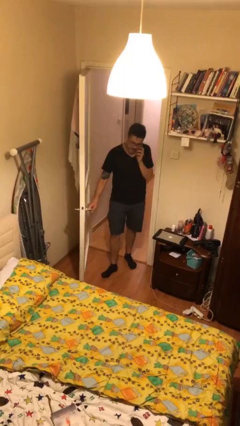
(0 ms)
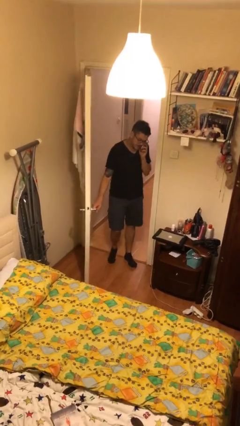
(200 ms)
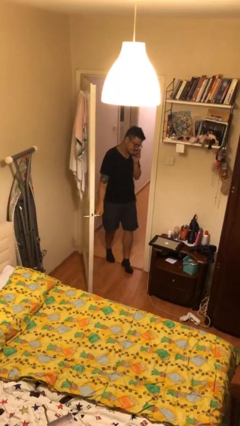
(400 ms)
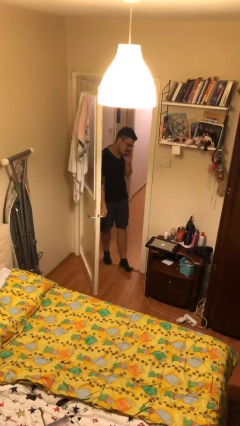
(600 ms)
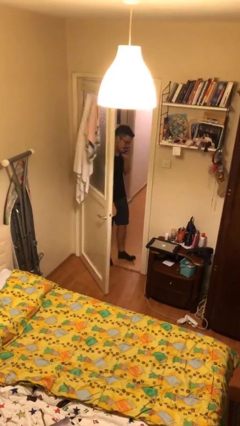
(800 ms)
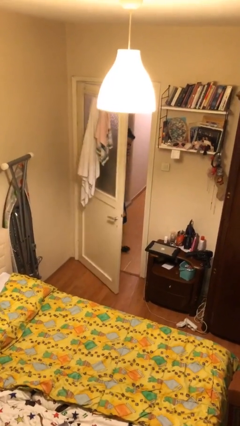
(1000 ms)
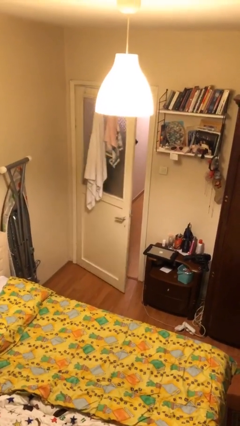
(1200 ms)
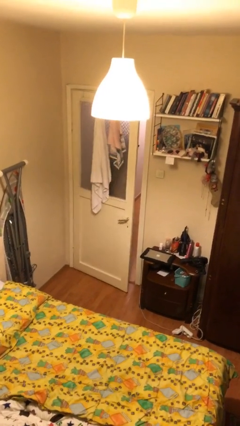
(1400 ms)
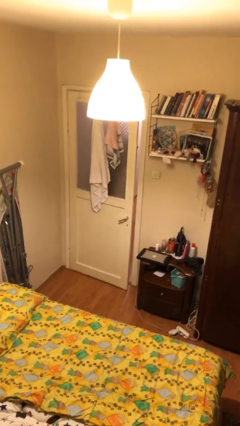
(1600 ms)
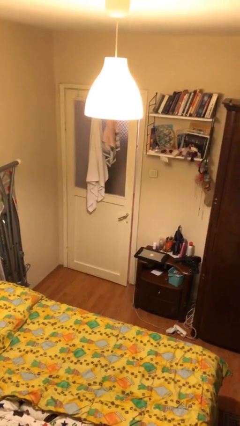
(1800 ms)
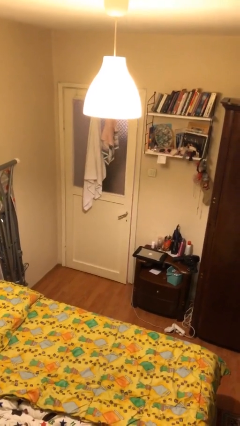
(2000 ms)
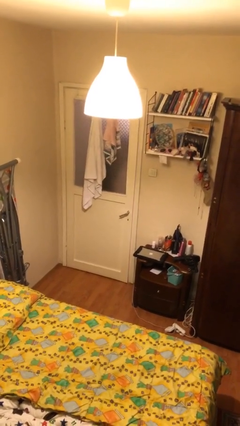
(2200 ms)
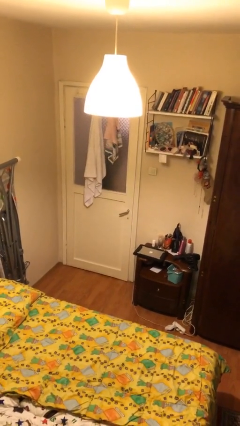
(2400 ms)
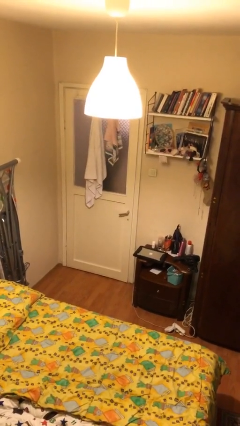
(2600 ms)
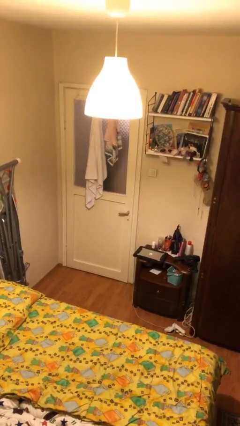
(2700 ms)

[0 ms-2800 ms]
person closes facility door

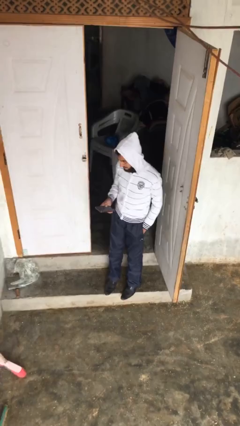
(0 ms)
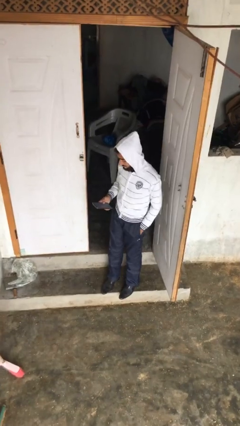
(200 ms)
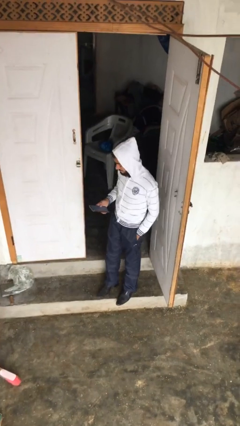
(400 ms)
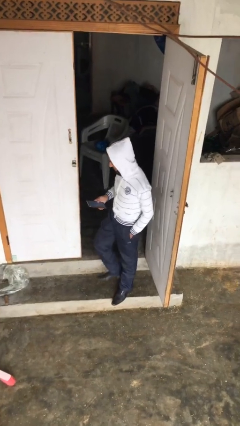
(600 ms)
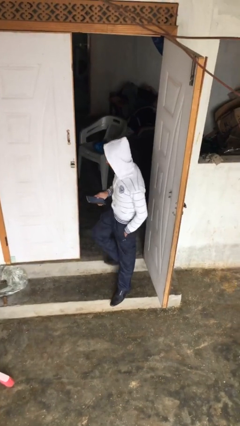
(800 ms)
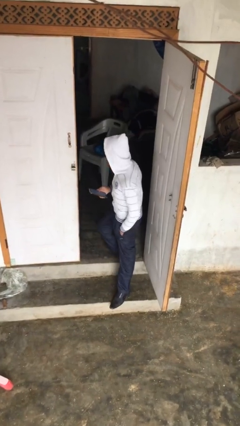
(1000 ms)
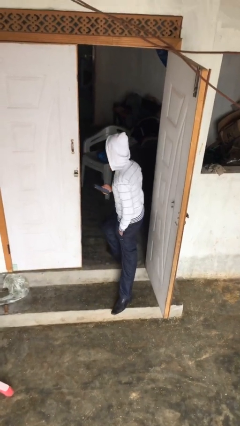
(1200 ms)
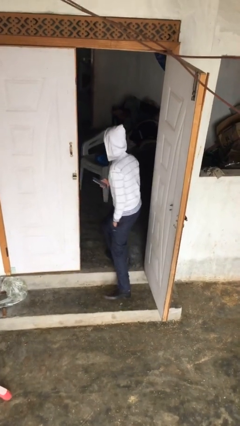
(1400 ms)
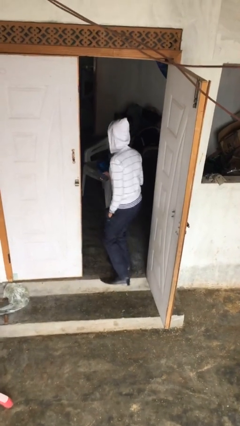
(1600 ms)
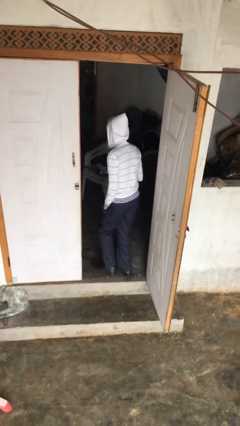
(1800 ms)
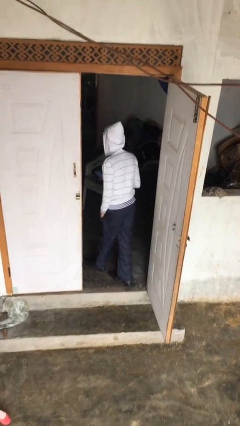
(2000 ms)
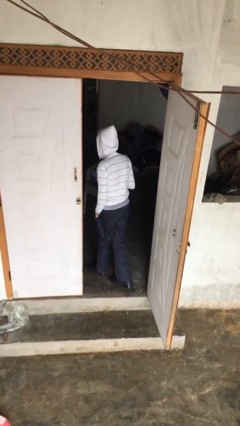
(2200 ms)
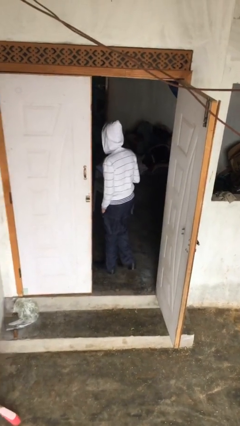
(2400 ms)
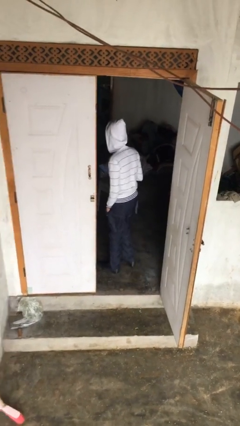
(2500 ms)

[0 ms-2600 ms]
person exits scene through structure

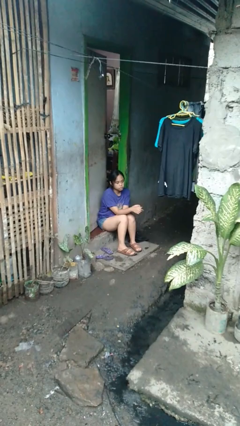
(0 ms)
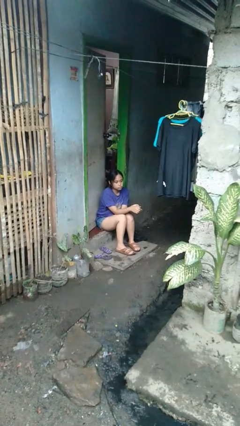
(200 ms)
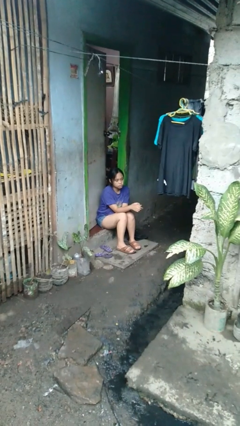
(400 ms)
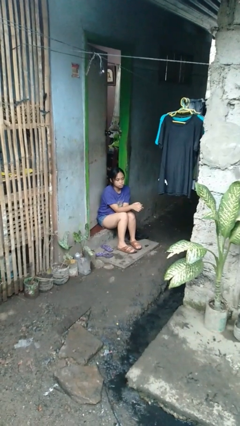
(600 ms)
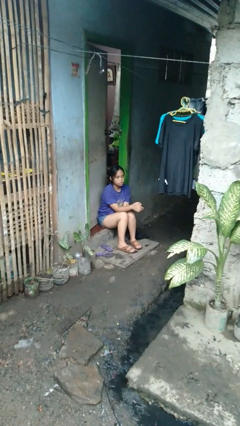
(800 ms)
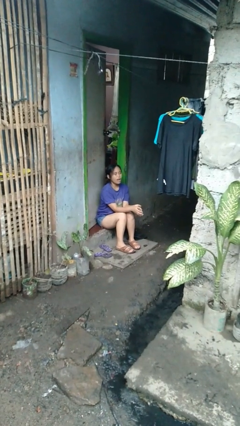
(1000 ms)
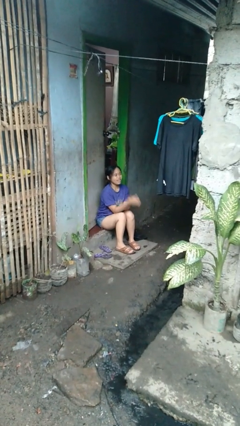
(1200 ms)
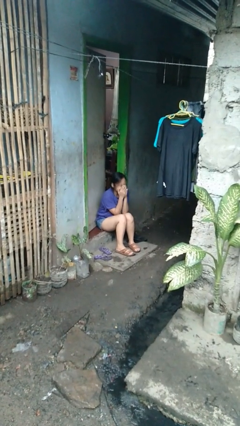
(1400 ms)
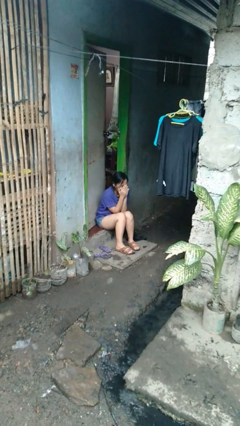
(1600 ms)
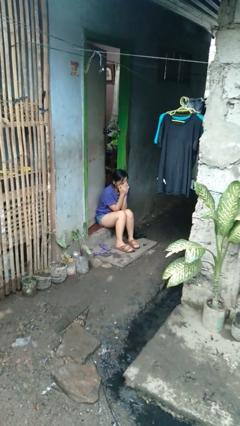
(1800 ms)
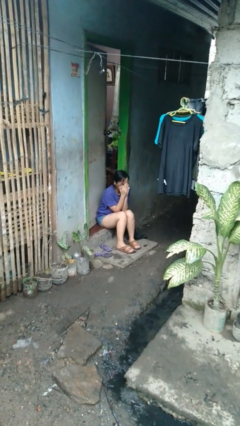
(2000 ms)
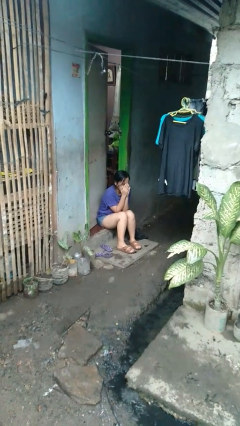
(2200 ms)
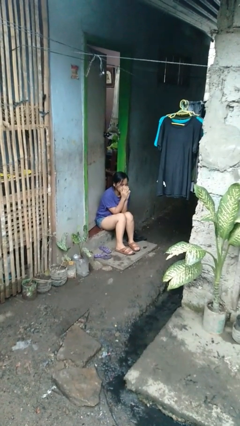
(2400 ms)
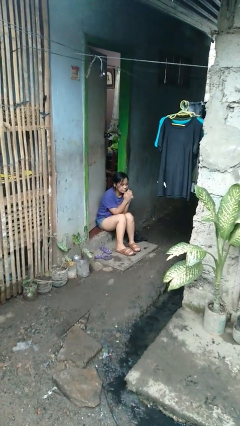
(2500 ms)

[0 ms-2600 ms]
person sneezes into hand

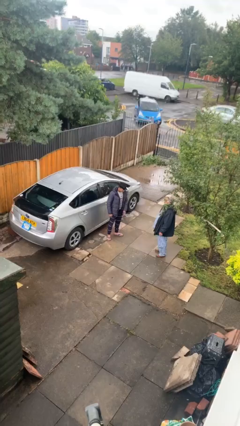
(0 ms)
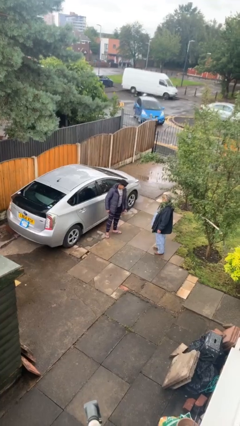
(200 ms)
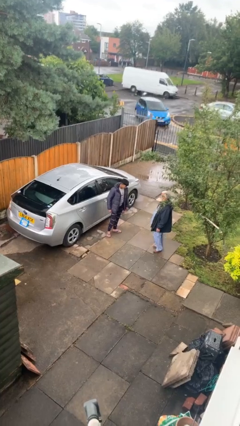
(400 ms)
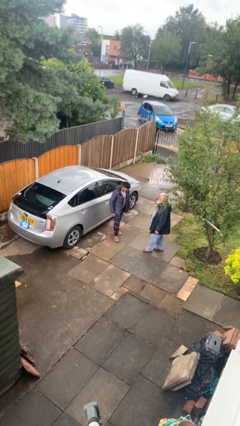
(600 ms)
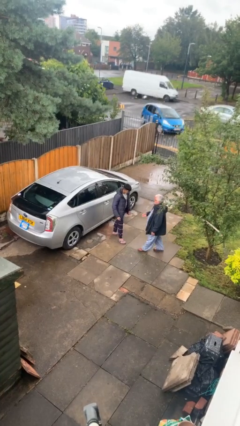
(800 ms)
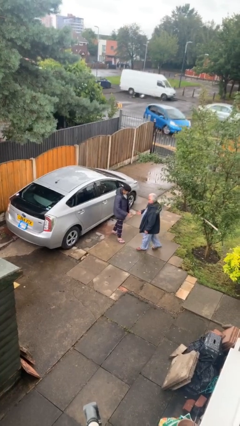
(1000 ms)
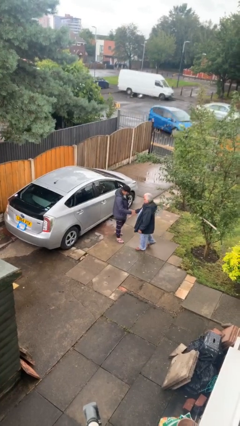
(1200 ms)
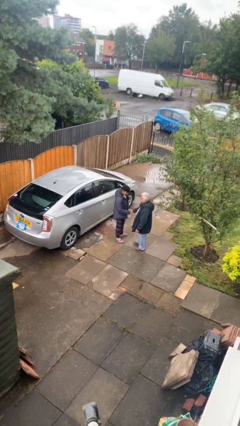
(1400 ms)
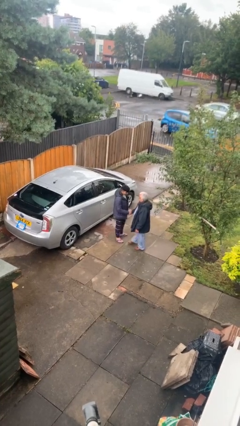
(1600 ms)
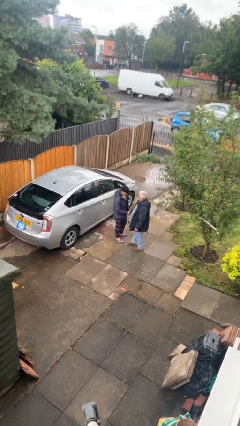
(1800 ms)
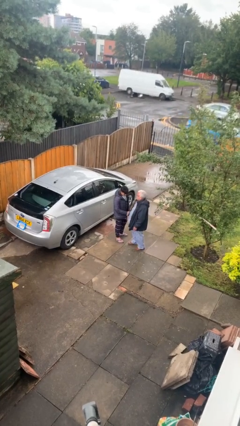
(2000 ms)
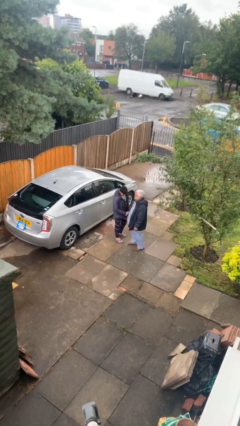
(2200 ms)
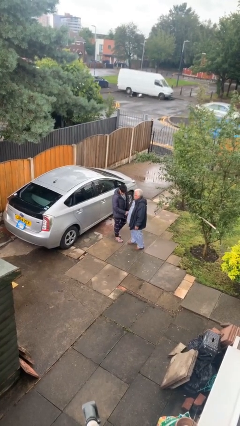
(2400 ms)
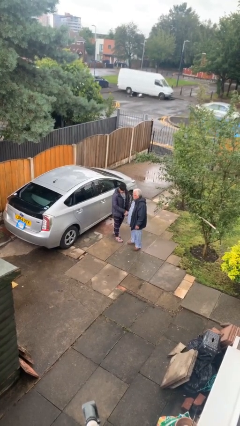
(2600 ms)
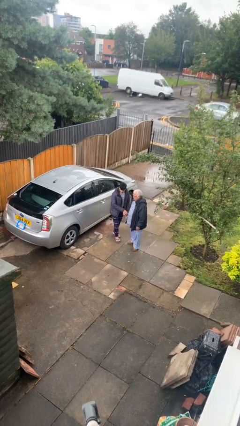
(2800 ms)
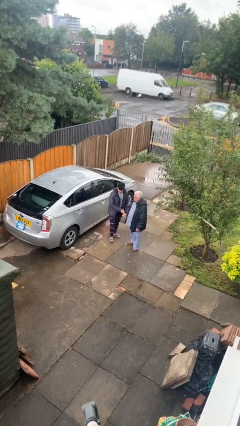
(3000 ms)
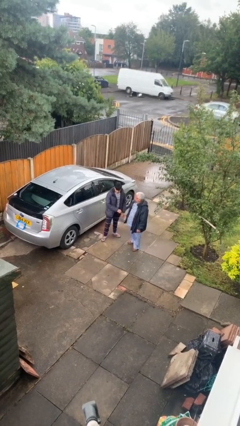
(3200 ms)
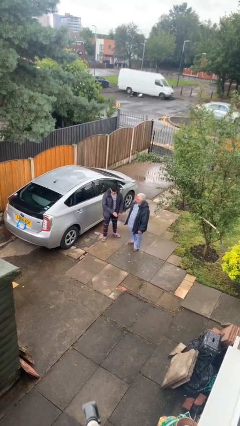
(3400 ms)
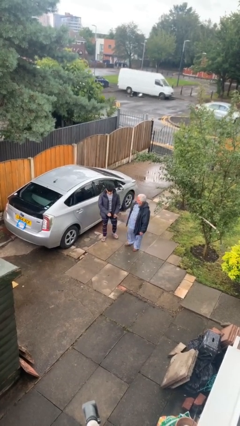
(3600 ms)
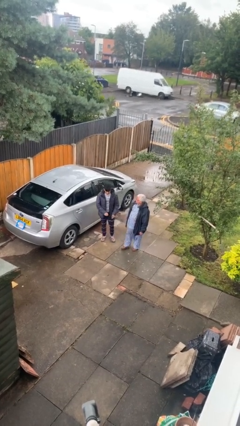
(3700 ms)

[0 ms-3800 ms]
person shakes hand

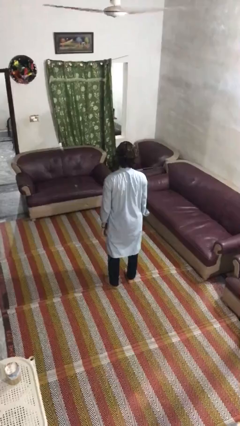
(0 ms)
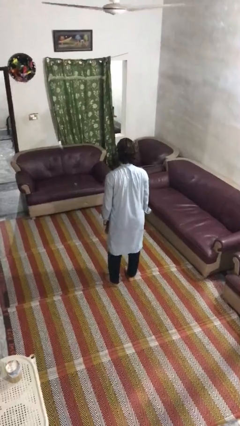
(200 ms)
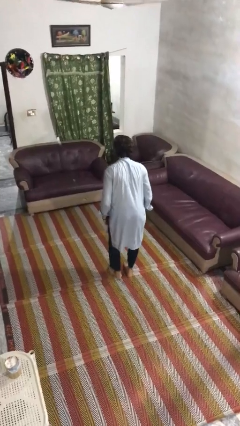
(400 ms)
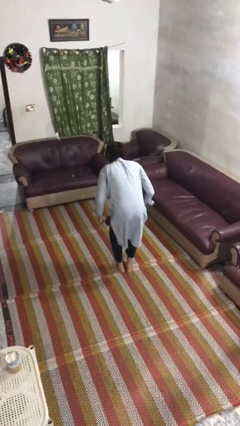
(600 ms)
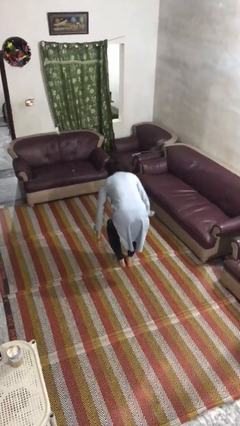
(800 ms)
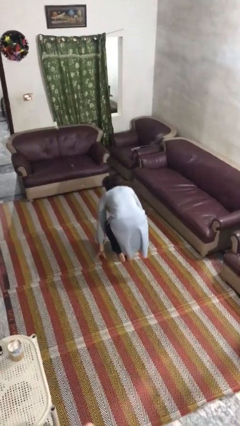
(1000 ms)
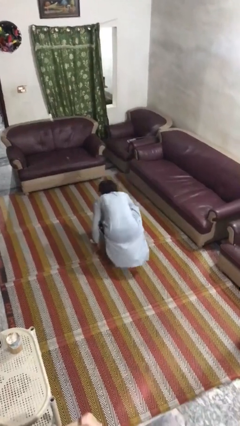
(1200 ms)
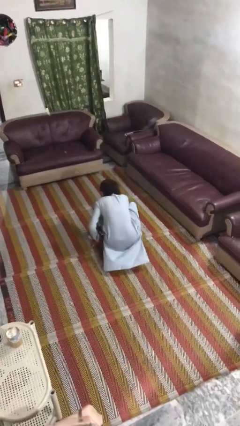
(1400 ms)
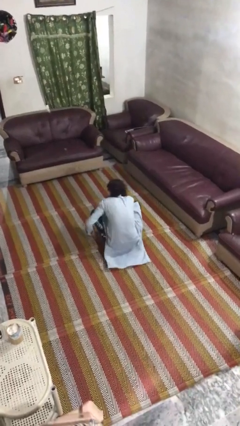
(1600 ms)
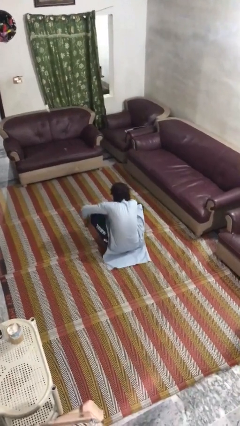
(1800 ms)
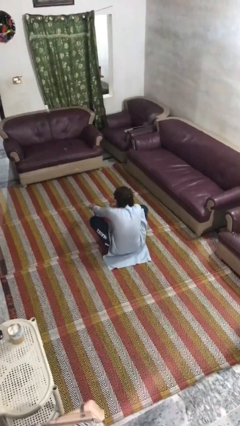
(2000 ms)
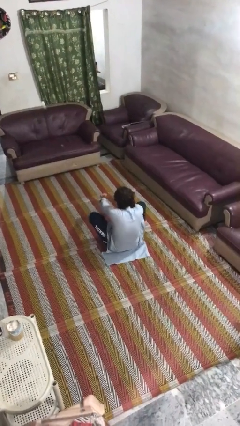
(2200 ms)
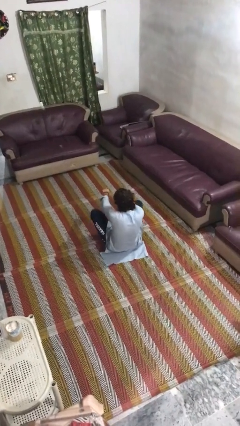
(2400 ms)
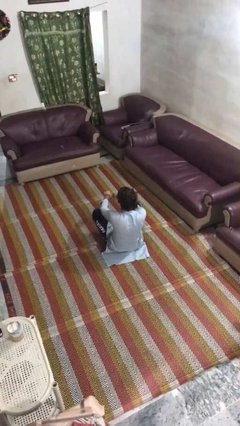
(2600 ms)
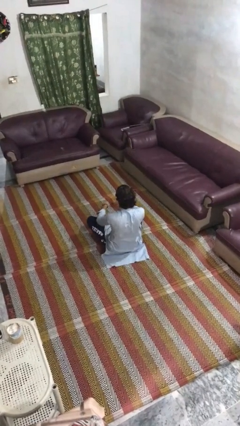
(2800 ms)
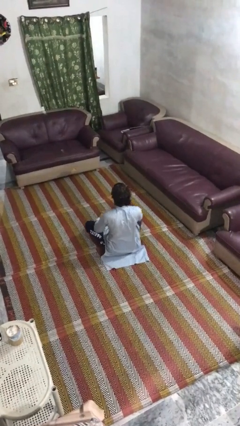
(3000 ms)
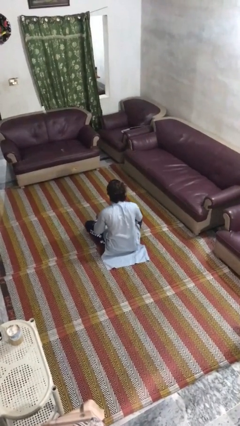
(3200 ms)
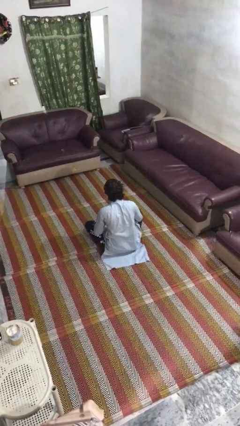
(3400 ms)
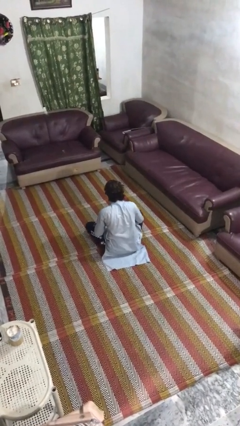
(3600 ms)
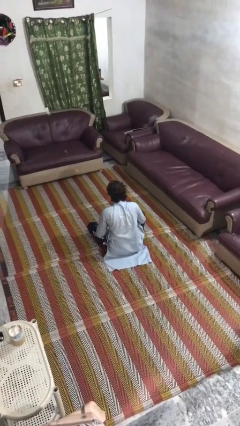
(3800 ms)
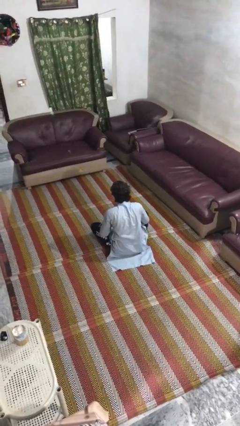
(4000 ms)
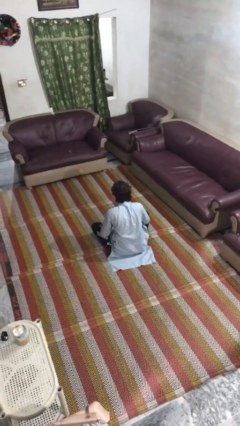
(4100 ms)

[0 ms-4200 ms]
person sits crisscross

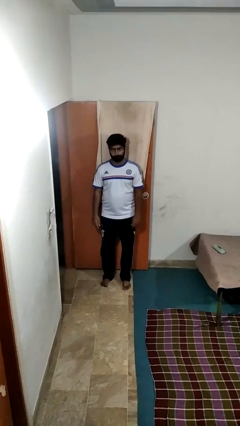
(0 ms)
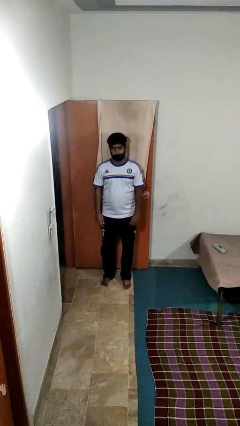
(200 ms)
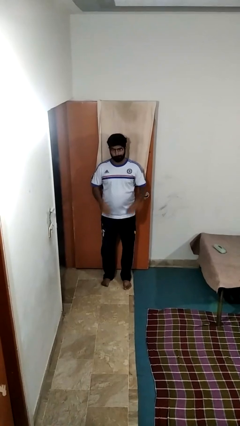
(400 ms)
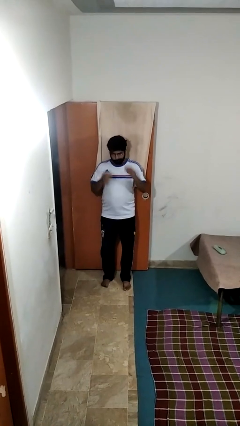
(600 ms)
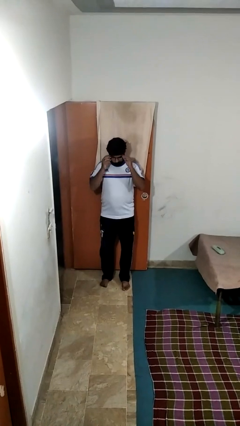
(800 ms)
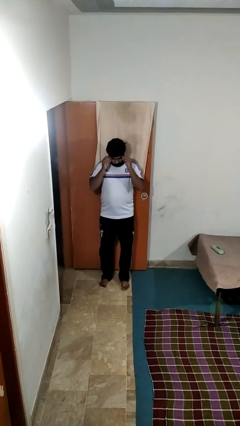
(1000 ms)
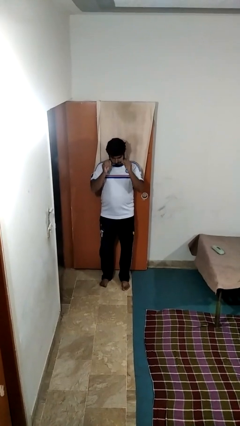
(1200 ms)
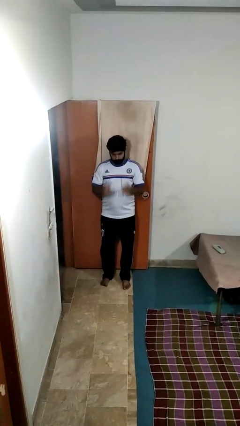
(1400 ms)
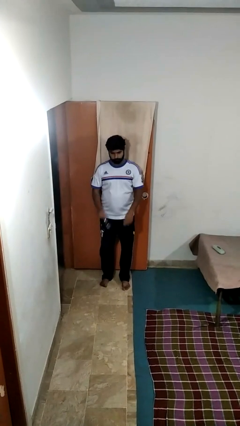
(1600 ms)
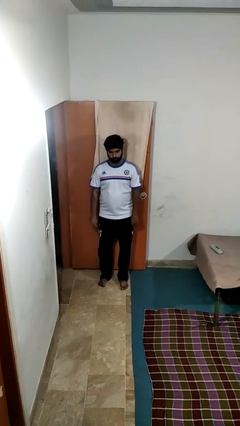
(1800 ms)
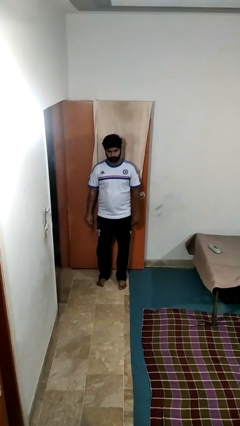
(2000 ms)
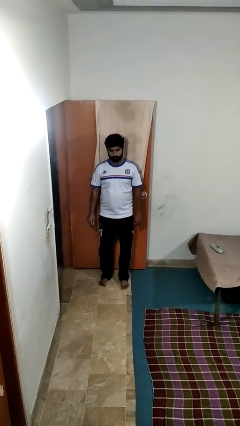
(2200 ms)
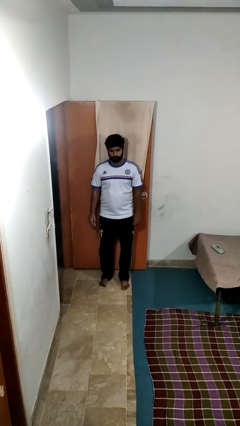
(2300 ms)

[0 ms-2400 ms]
person takes off glasses
